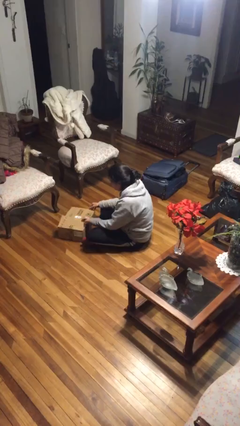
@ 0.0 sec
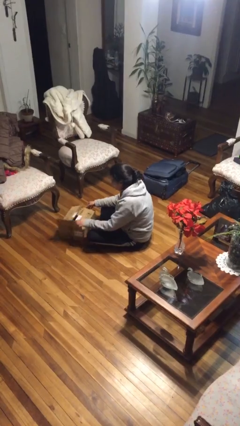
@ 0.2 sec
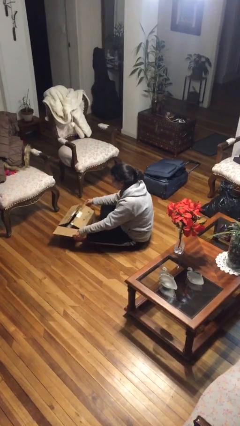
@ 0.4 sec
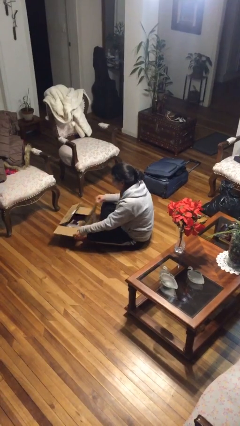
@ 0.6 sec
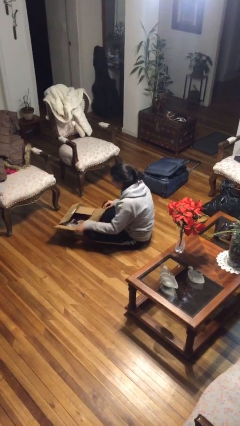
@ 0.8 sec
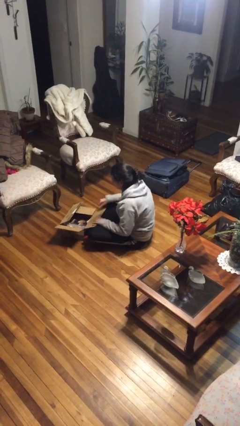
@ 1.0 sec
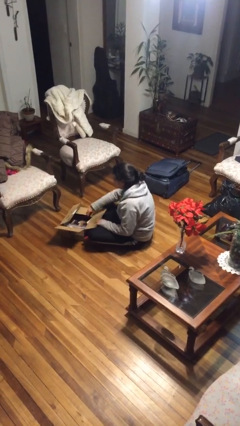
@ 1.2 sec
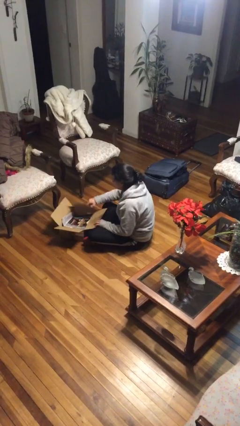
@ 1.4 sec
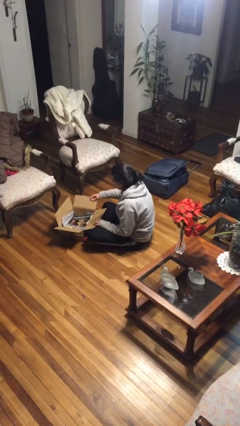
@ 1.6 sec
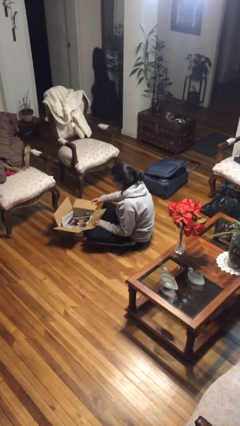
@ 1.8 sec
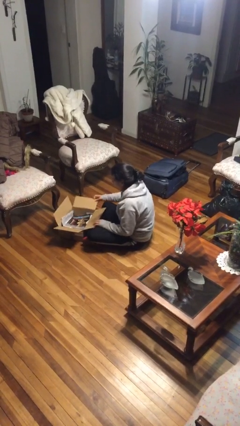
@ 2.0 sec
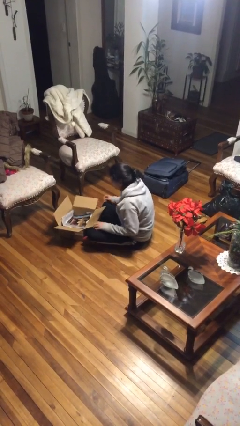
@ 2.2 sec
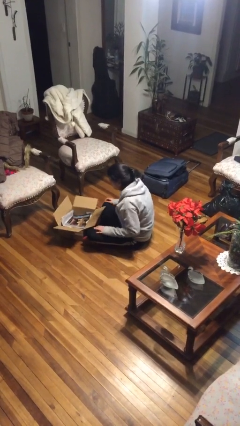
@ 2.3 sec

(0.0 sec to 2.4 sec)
person opens box

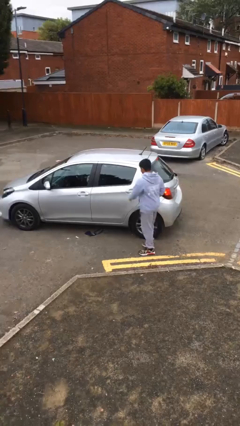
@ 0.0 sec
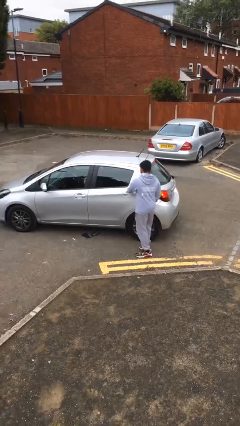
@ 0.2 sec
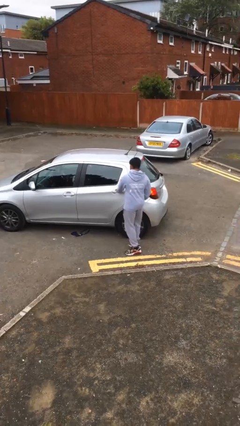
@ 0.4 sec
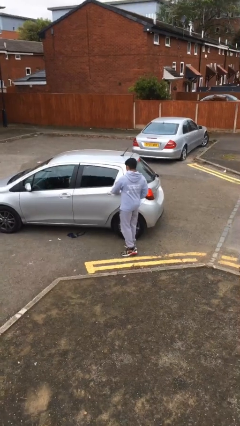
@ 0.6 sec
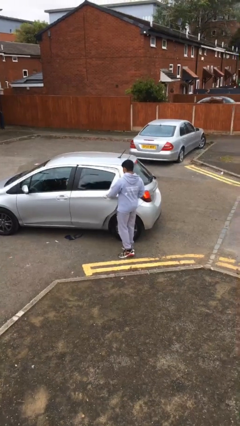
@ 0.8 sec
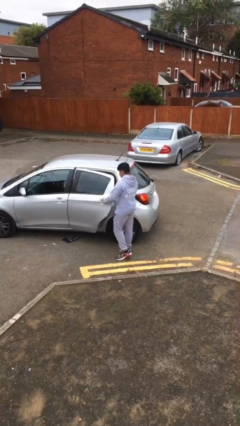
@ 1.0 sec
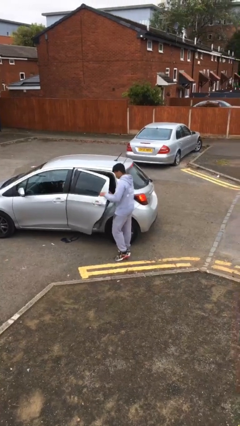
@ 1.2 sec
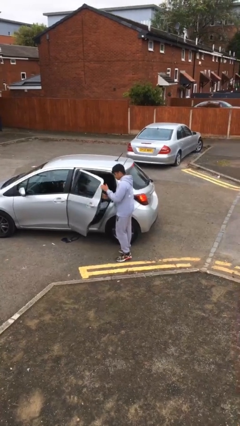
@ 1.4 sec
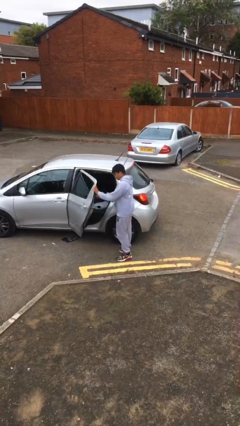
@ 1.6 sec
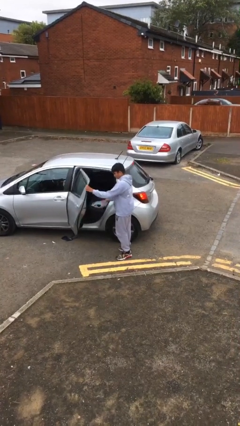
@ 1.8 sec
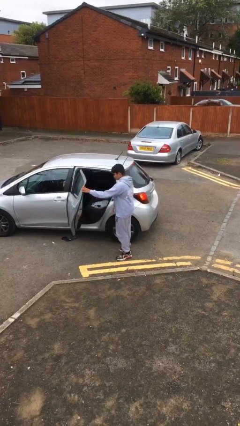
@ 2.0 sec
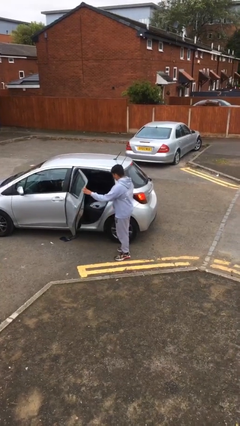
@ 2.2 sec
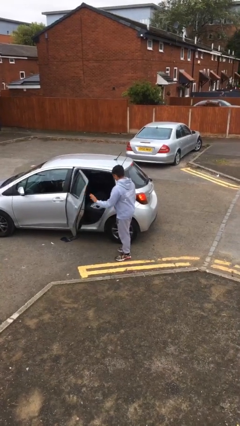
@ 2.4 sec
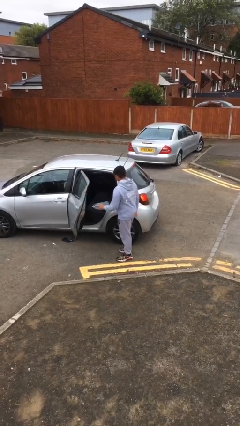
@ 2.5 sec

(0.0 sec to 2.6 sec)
person opens car door

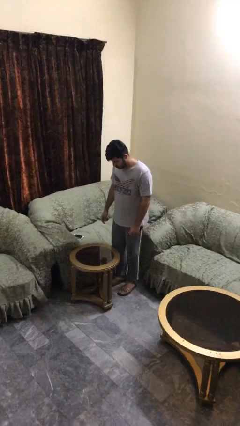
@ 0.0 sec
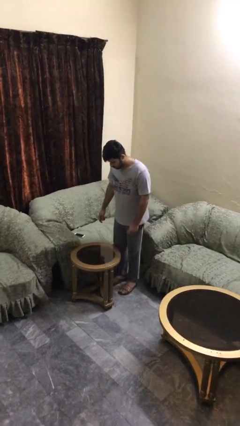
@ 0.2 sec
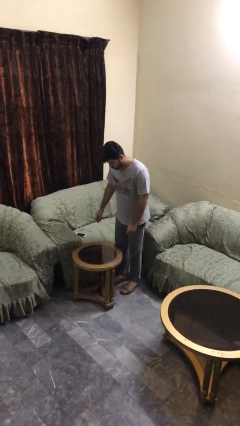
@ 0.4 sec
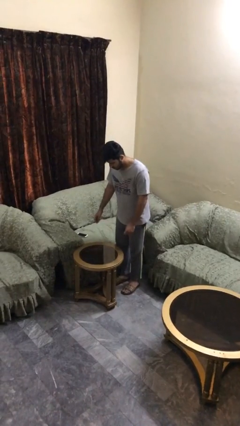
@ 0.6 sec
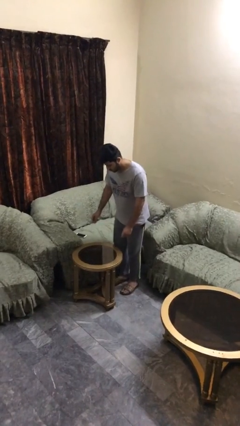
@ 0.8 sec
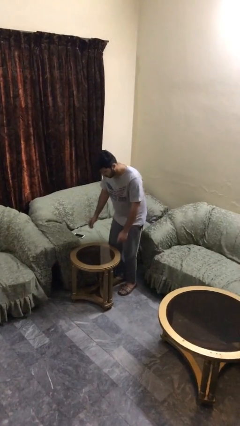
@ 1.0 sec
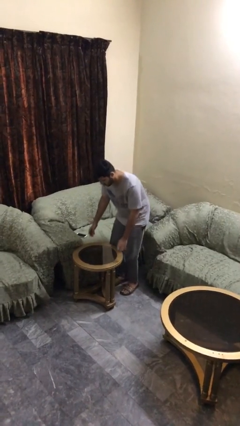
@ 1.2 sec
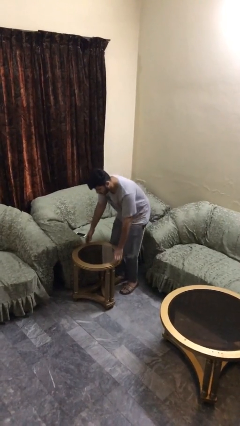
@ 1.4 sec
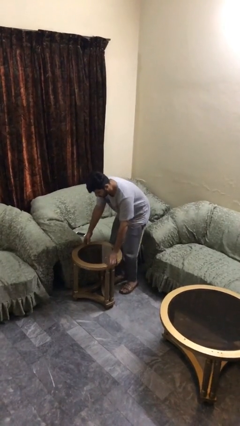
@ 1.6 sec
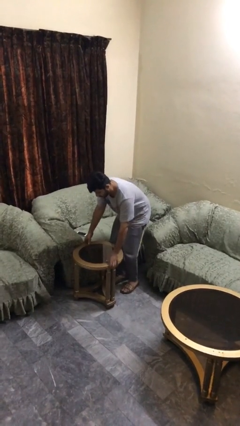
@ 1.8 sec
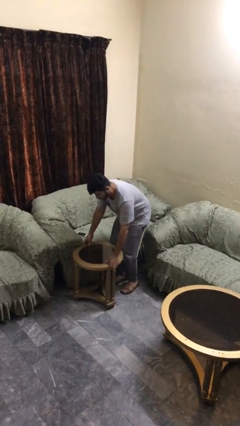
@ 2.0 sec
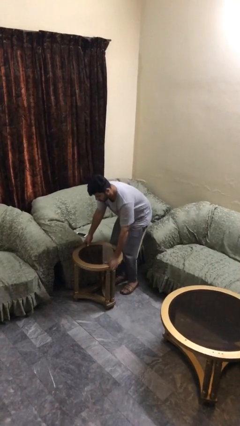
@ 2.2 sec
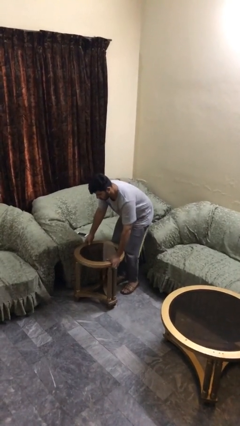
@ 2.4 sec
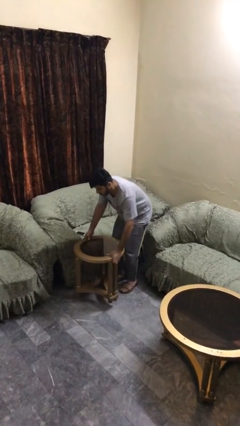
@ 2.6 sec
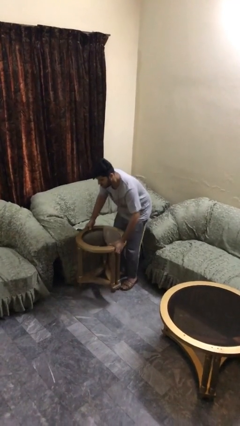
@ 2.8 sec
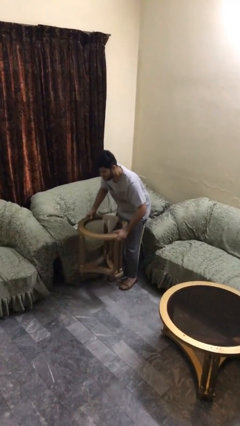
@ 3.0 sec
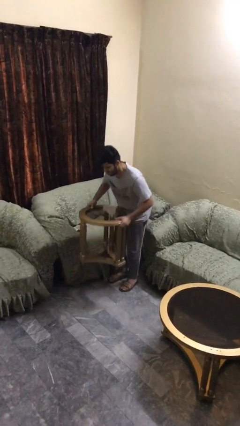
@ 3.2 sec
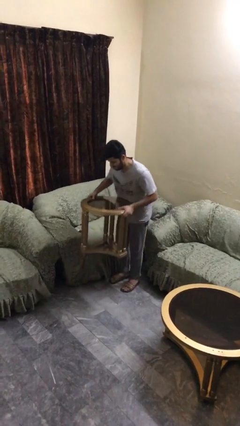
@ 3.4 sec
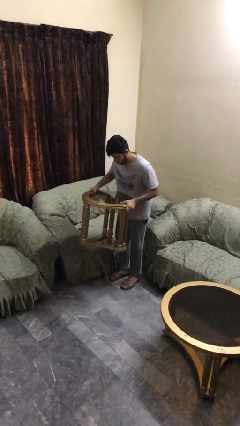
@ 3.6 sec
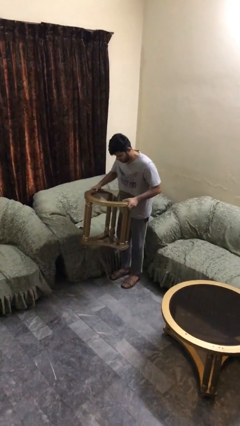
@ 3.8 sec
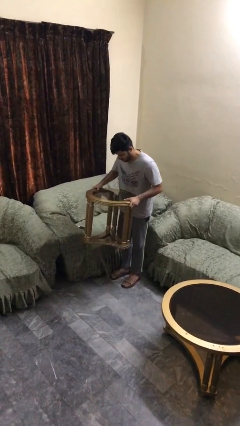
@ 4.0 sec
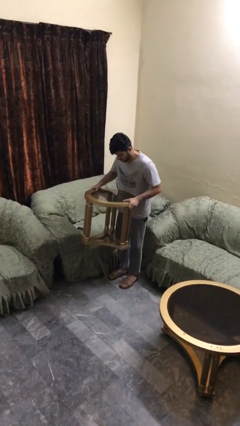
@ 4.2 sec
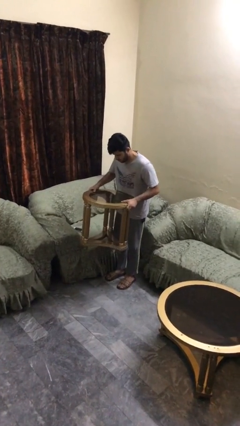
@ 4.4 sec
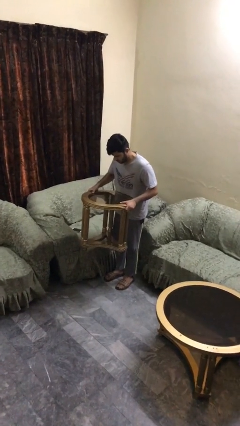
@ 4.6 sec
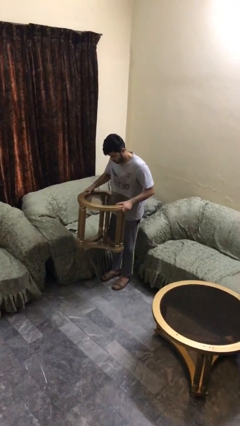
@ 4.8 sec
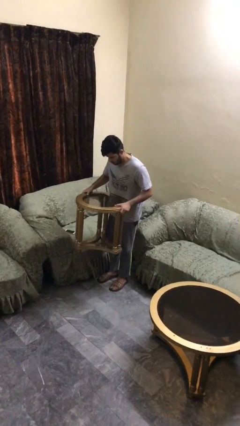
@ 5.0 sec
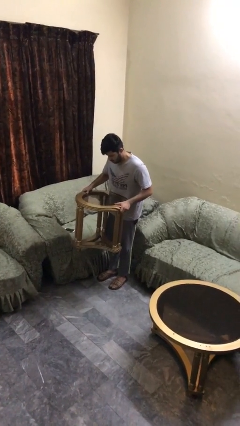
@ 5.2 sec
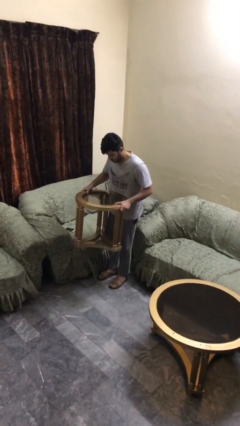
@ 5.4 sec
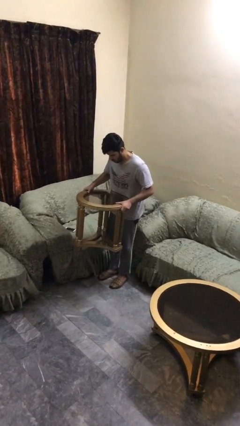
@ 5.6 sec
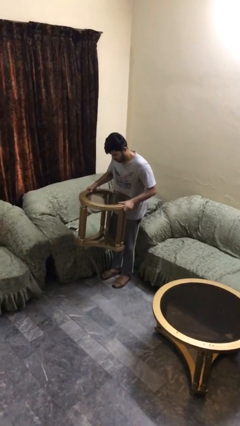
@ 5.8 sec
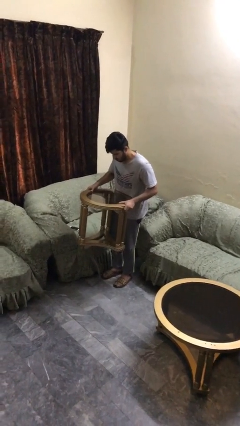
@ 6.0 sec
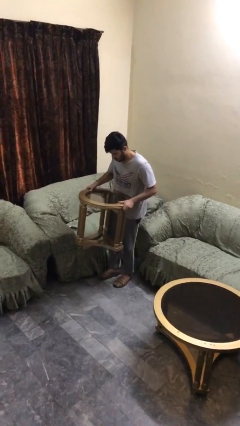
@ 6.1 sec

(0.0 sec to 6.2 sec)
person picks up object from floor

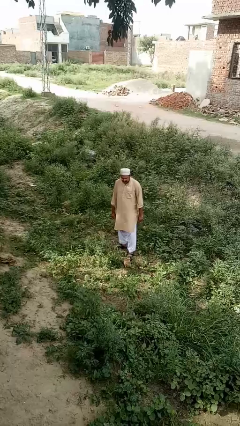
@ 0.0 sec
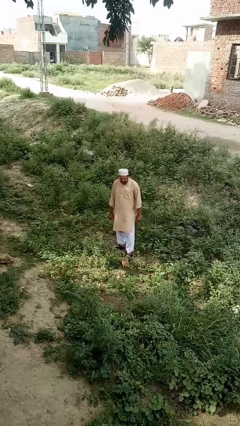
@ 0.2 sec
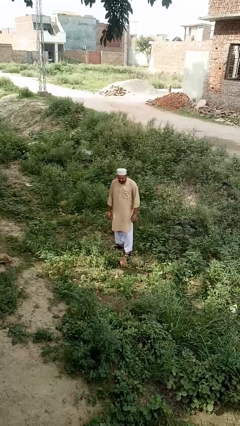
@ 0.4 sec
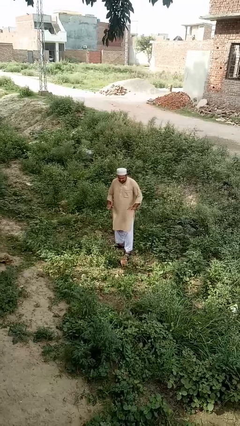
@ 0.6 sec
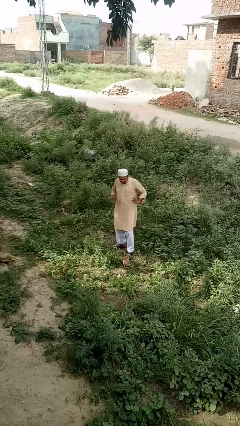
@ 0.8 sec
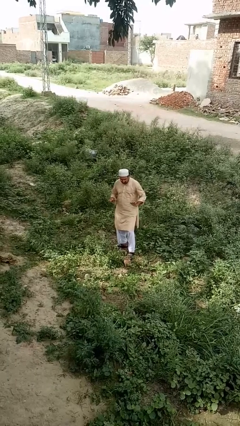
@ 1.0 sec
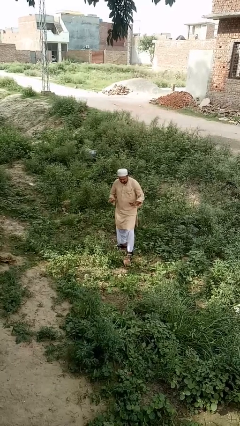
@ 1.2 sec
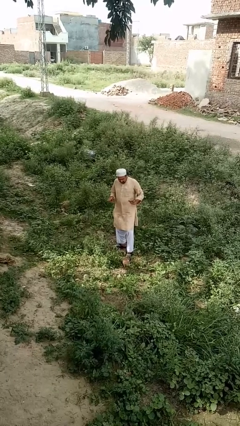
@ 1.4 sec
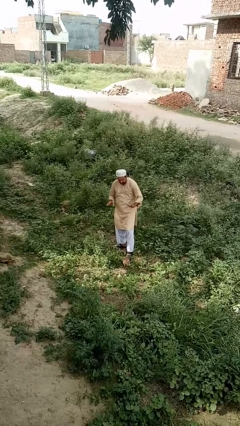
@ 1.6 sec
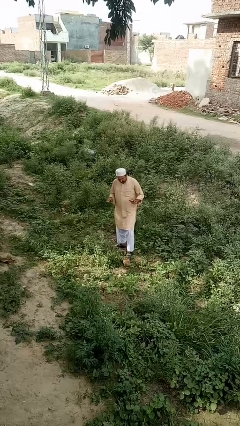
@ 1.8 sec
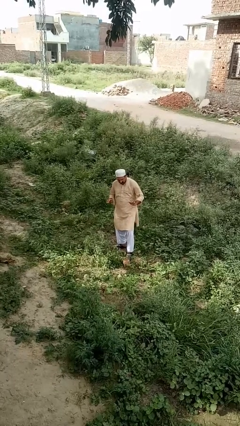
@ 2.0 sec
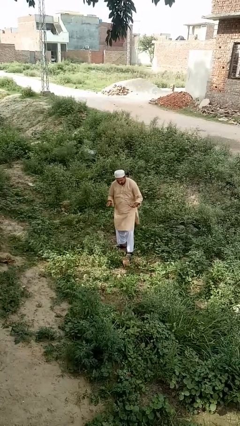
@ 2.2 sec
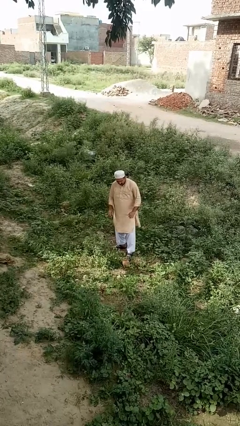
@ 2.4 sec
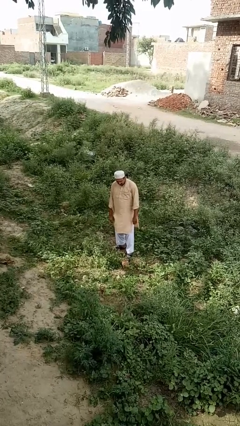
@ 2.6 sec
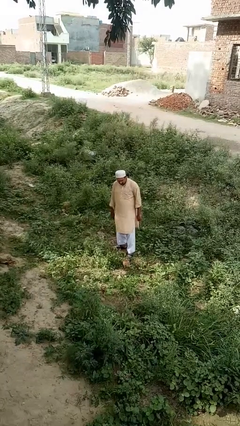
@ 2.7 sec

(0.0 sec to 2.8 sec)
person dances in place

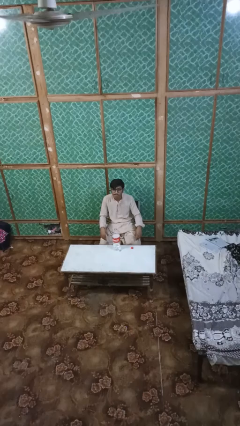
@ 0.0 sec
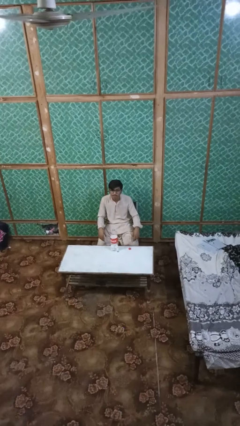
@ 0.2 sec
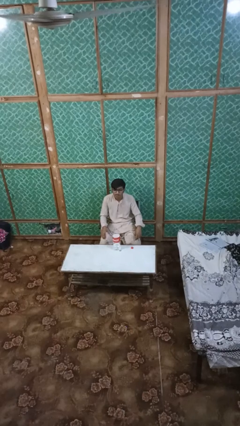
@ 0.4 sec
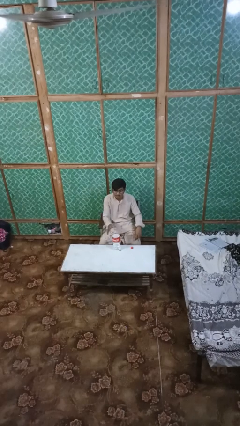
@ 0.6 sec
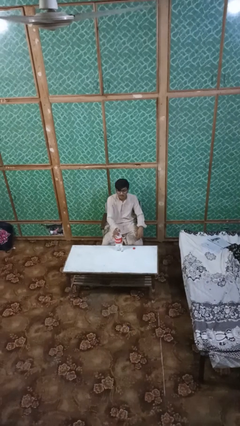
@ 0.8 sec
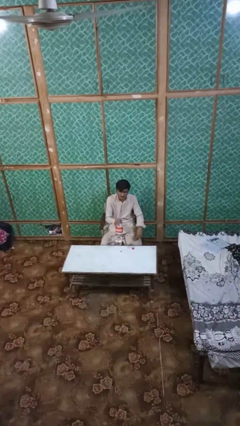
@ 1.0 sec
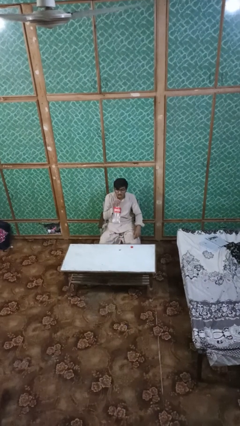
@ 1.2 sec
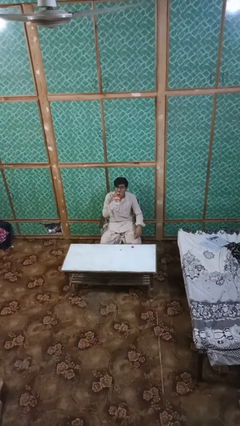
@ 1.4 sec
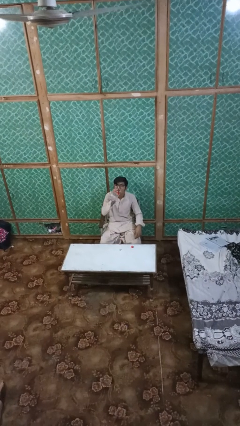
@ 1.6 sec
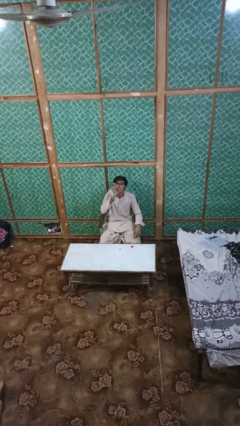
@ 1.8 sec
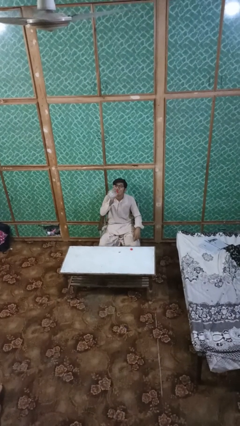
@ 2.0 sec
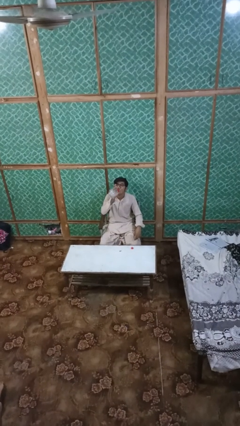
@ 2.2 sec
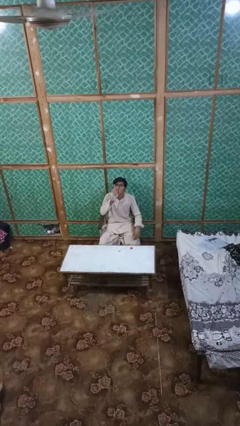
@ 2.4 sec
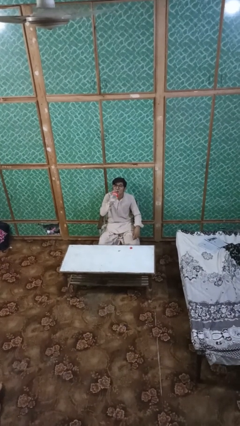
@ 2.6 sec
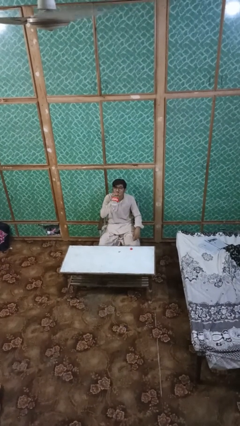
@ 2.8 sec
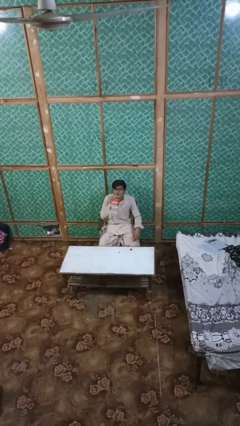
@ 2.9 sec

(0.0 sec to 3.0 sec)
person drinks from bottle
